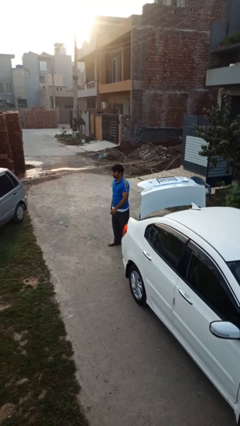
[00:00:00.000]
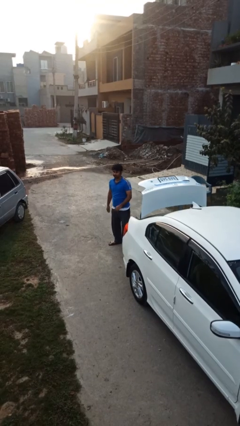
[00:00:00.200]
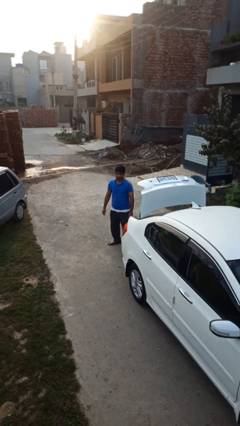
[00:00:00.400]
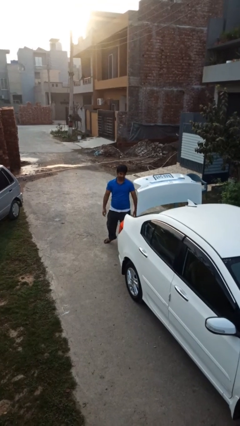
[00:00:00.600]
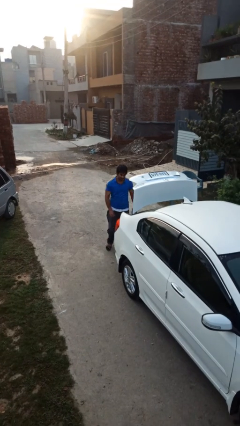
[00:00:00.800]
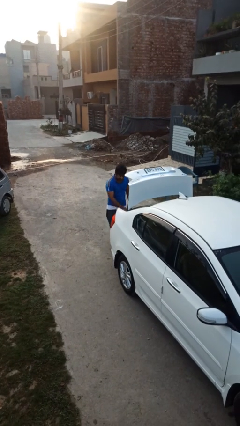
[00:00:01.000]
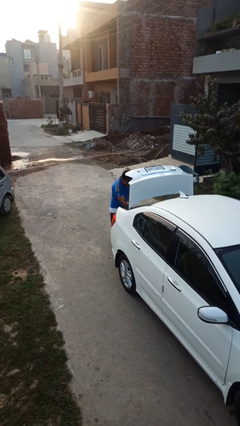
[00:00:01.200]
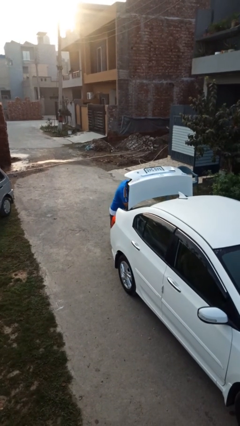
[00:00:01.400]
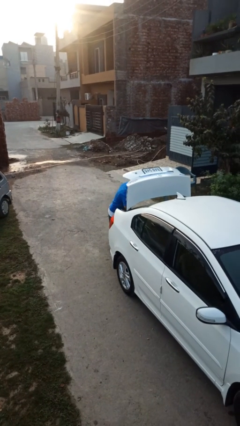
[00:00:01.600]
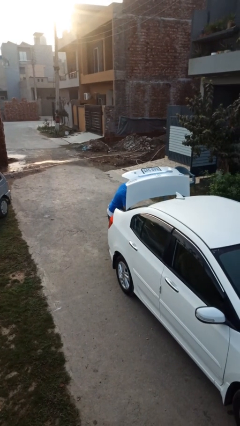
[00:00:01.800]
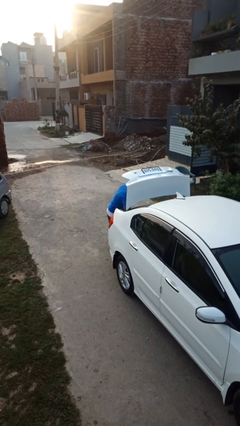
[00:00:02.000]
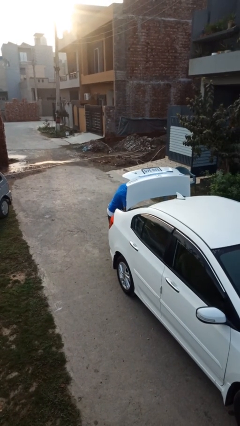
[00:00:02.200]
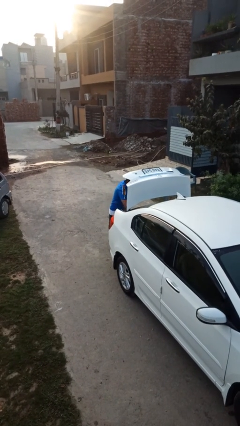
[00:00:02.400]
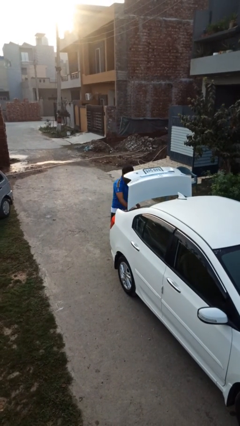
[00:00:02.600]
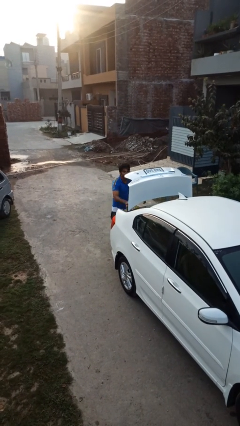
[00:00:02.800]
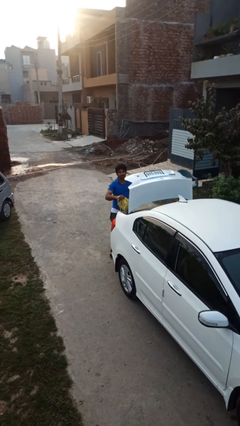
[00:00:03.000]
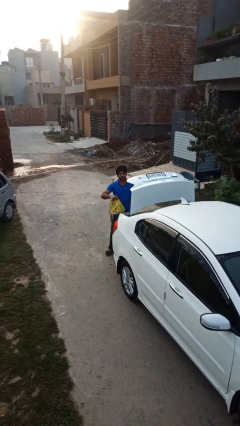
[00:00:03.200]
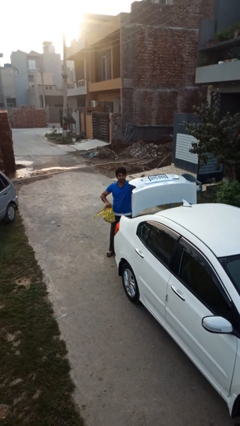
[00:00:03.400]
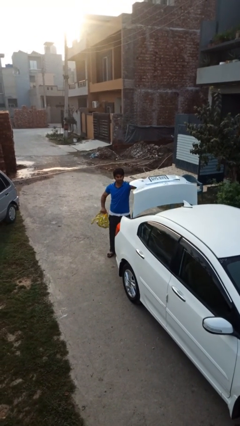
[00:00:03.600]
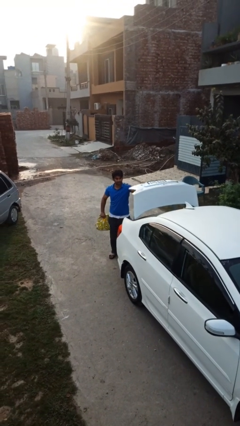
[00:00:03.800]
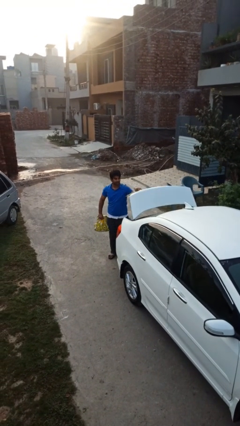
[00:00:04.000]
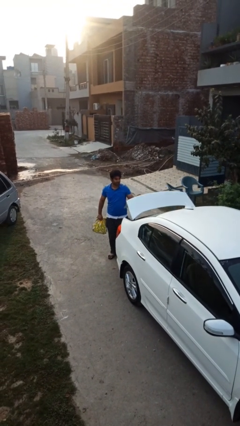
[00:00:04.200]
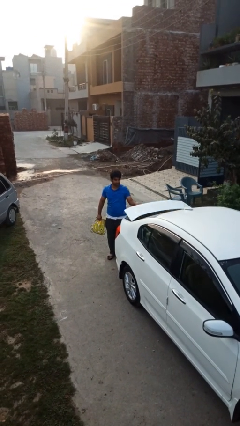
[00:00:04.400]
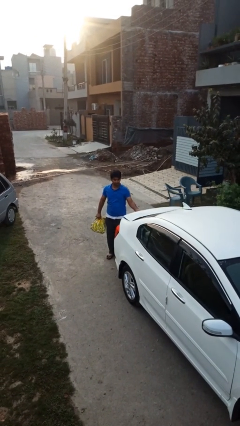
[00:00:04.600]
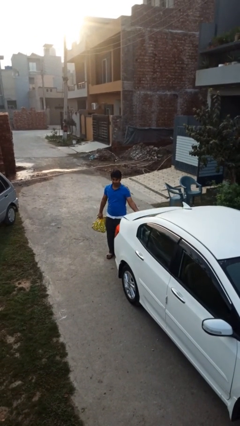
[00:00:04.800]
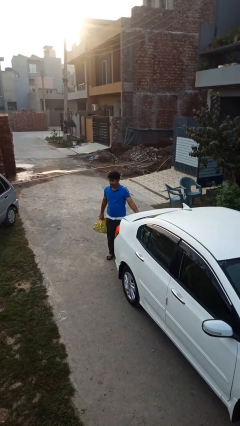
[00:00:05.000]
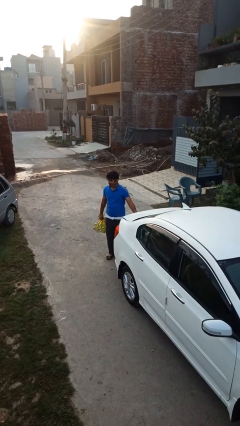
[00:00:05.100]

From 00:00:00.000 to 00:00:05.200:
person unloads car

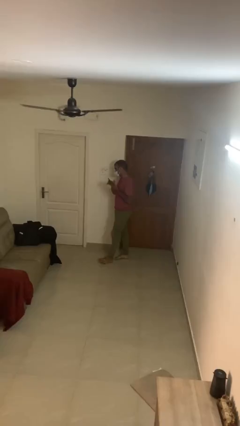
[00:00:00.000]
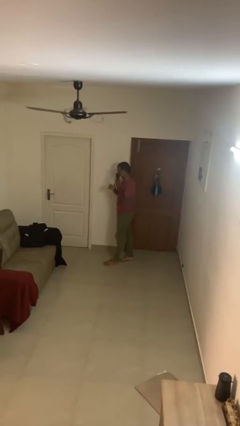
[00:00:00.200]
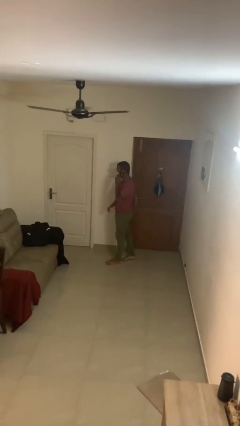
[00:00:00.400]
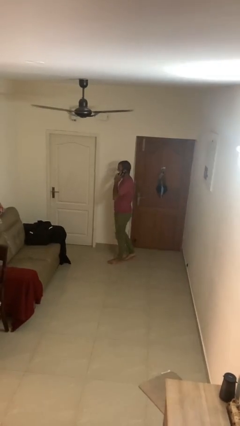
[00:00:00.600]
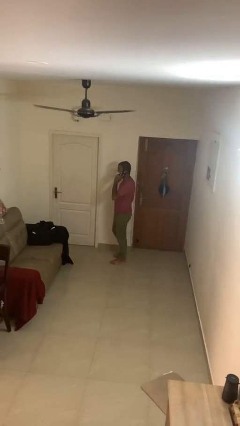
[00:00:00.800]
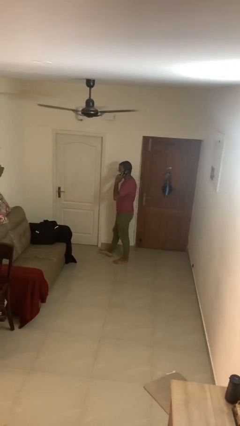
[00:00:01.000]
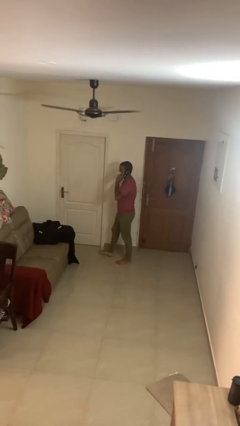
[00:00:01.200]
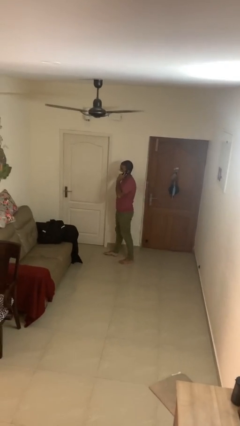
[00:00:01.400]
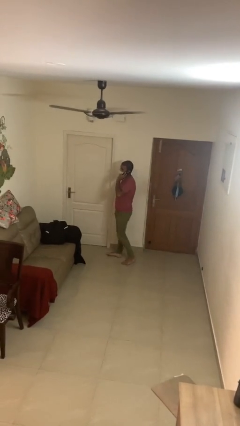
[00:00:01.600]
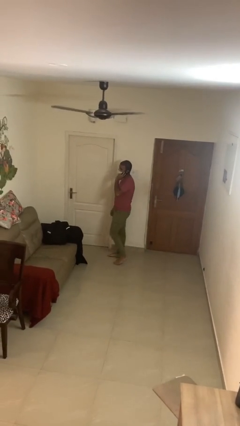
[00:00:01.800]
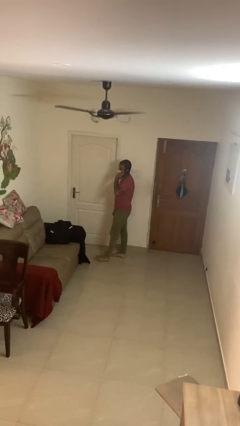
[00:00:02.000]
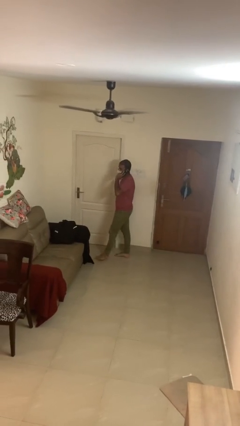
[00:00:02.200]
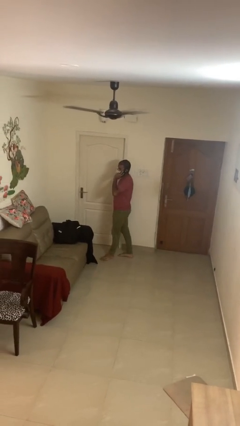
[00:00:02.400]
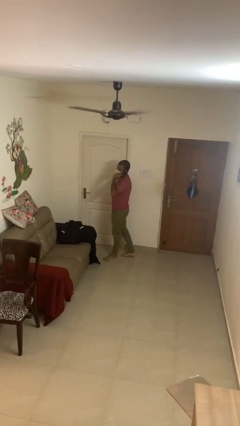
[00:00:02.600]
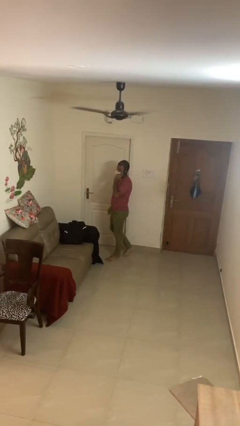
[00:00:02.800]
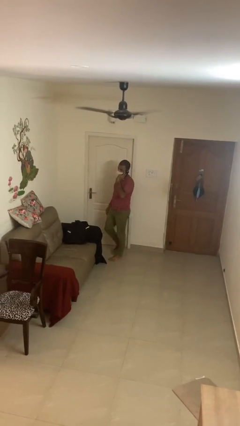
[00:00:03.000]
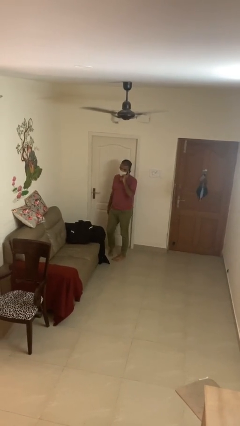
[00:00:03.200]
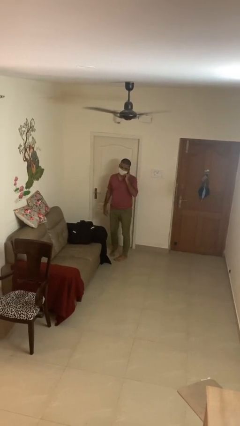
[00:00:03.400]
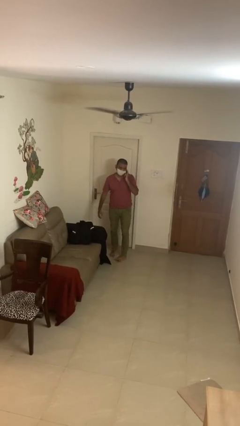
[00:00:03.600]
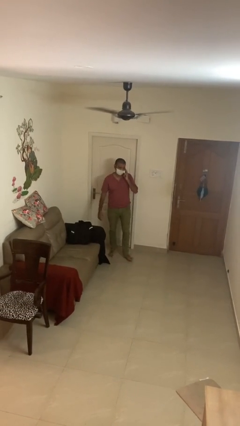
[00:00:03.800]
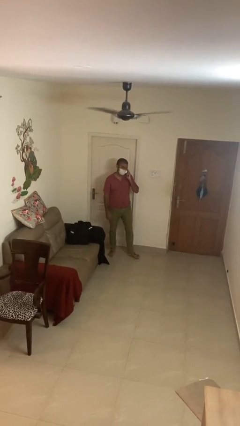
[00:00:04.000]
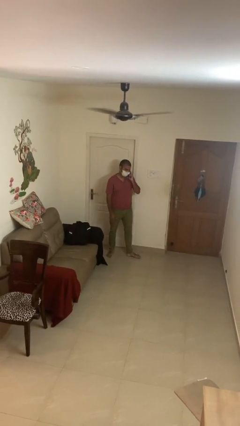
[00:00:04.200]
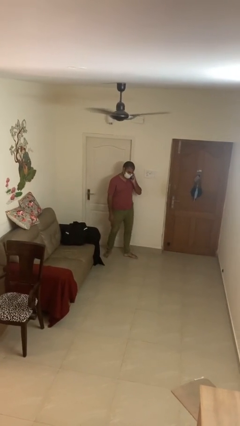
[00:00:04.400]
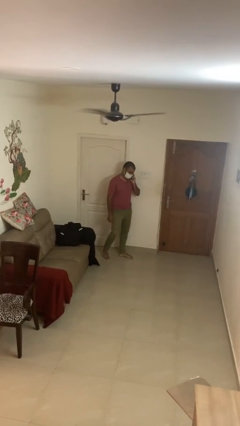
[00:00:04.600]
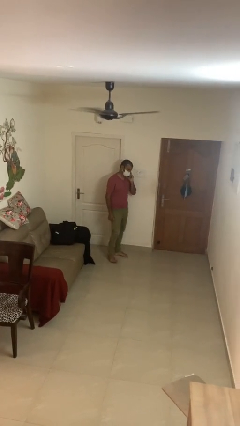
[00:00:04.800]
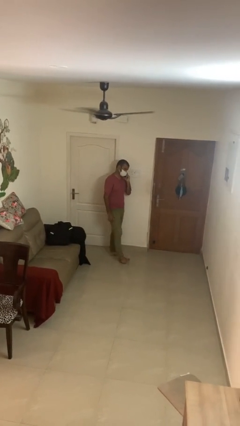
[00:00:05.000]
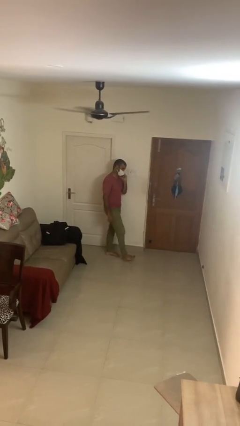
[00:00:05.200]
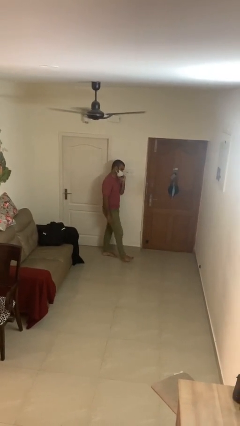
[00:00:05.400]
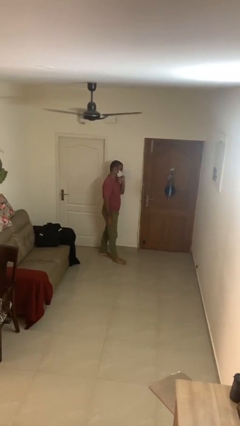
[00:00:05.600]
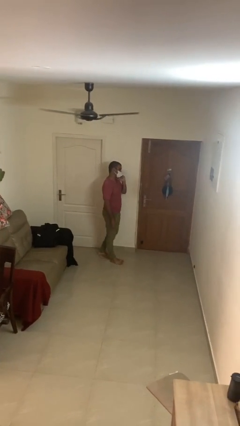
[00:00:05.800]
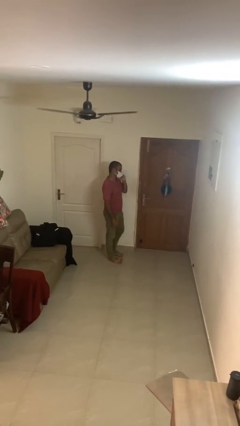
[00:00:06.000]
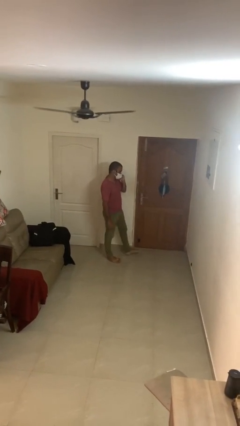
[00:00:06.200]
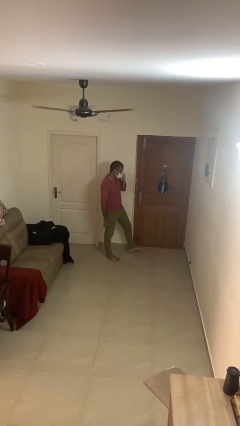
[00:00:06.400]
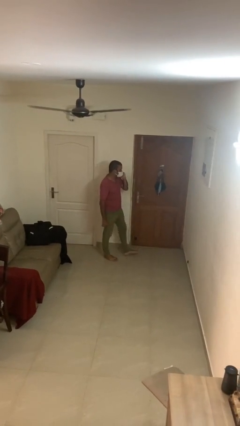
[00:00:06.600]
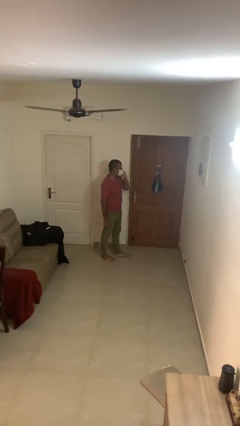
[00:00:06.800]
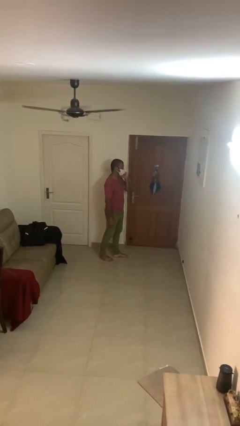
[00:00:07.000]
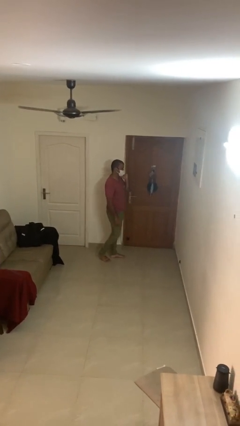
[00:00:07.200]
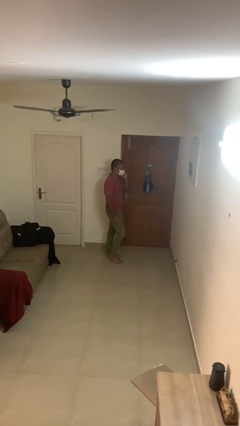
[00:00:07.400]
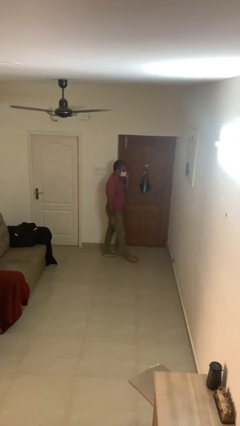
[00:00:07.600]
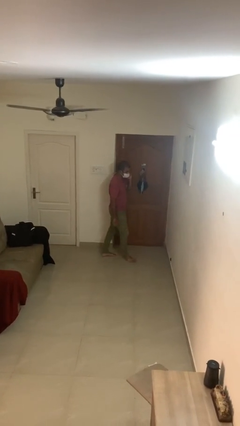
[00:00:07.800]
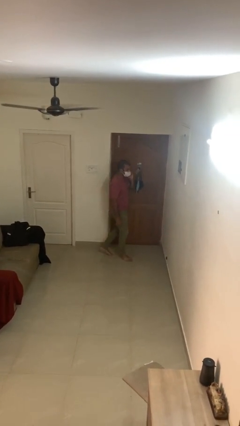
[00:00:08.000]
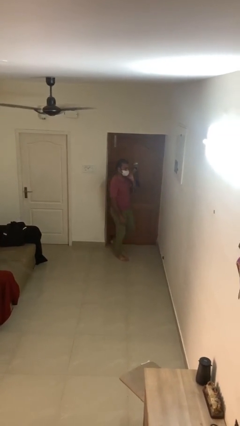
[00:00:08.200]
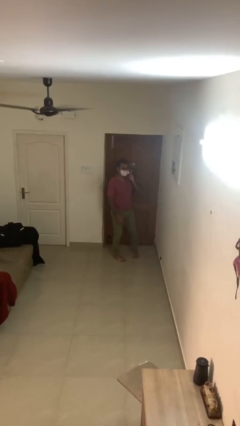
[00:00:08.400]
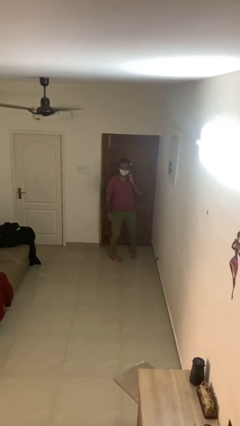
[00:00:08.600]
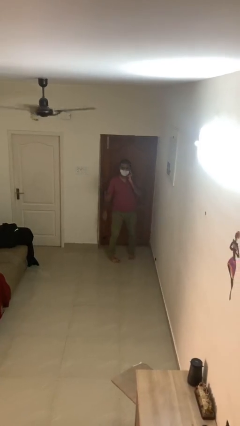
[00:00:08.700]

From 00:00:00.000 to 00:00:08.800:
person talks on phone

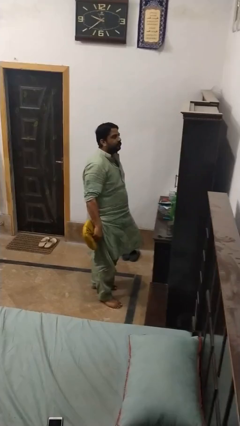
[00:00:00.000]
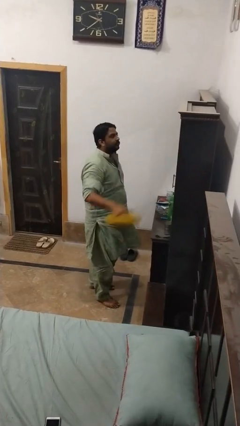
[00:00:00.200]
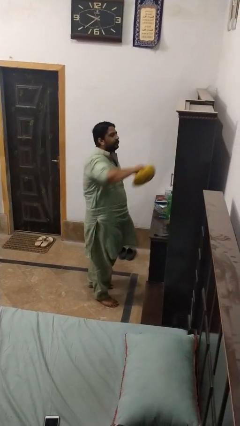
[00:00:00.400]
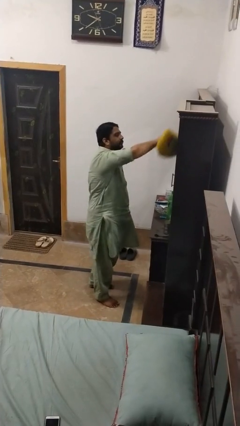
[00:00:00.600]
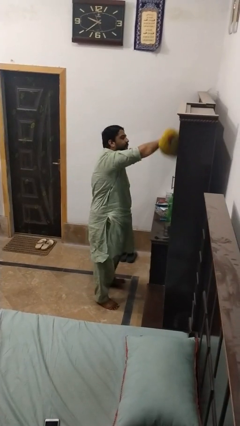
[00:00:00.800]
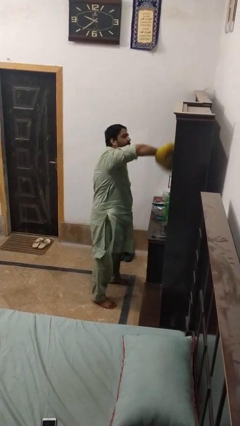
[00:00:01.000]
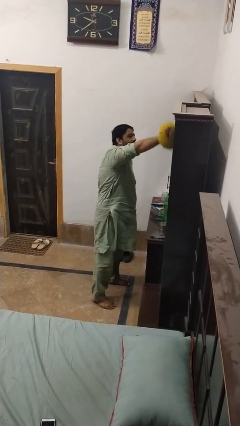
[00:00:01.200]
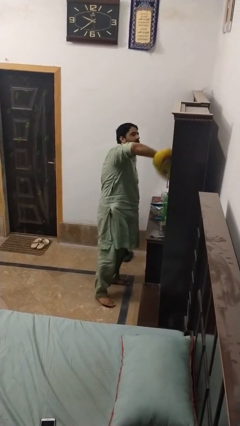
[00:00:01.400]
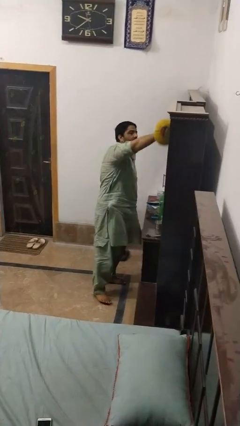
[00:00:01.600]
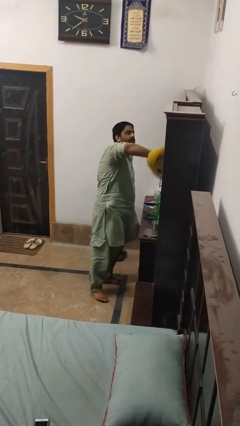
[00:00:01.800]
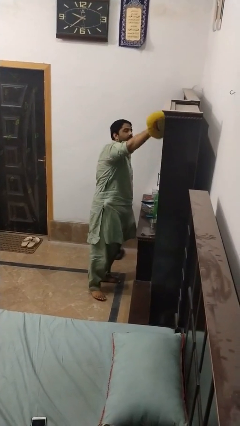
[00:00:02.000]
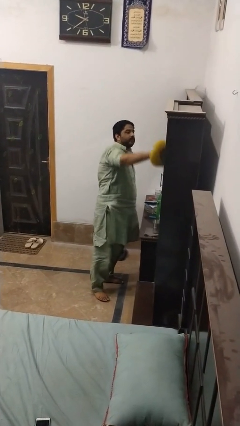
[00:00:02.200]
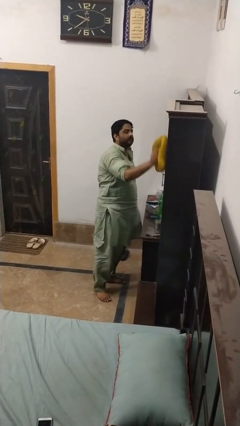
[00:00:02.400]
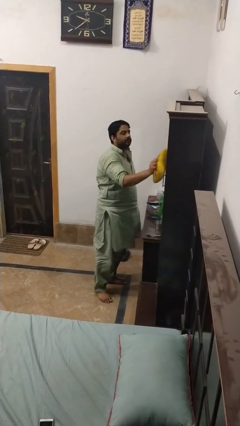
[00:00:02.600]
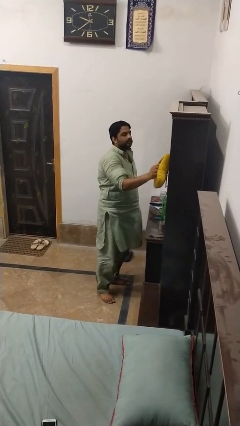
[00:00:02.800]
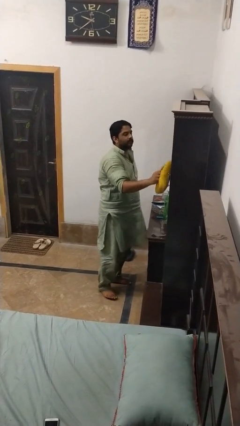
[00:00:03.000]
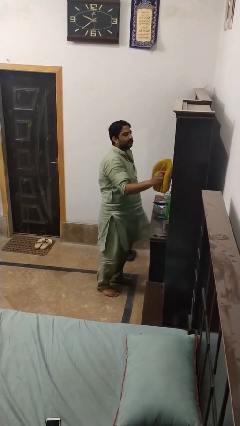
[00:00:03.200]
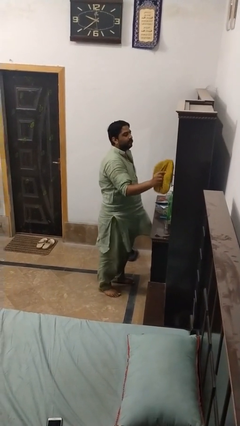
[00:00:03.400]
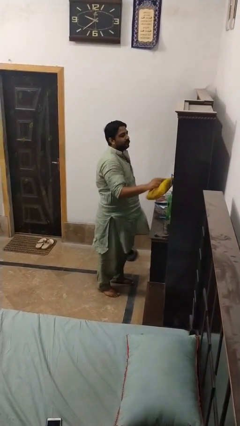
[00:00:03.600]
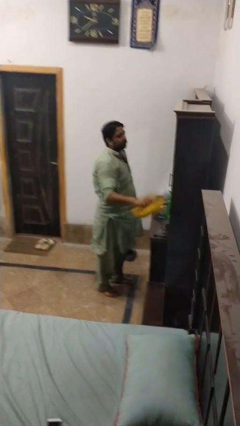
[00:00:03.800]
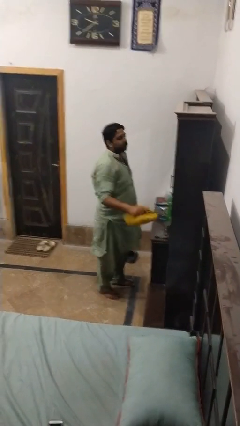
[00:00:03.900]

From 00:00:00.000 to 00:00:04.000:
person dusts furniture
